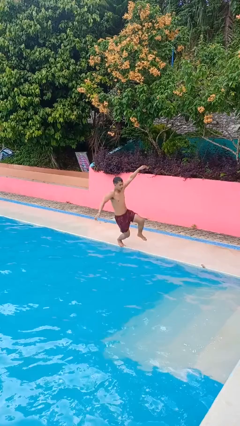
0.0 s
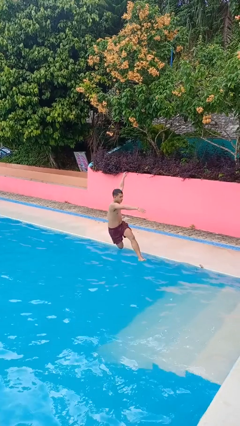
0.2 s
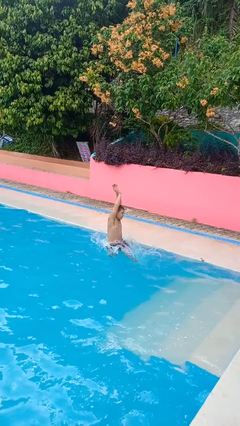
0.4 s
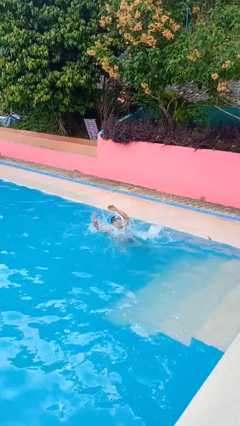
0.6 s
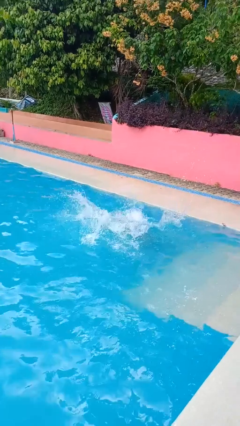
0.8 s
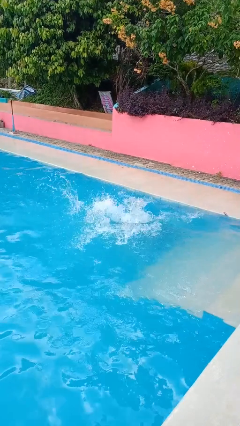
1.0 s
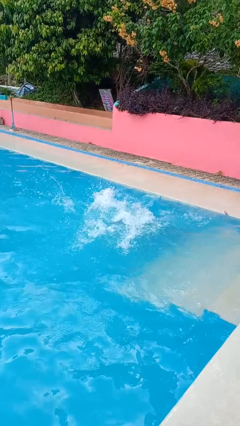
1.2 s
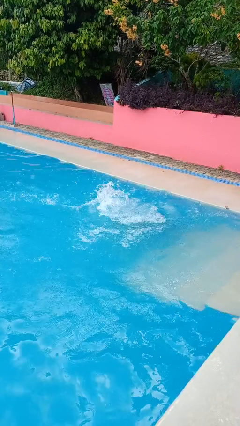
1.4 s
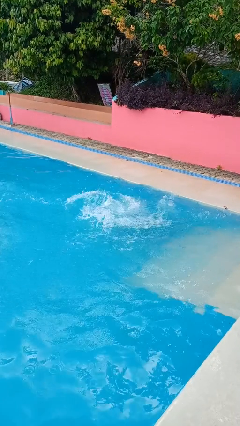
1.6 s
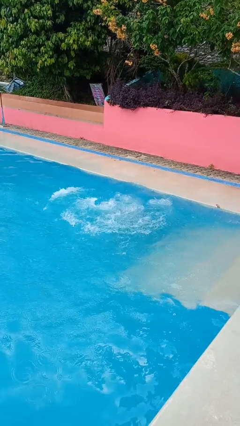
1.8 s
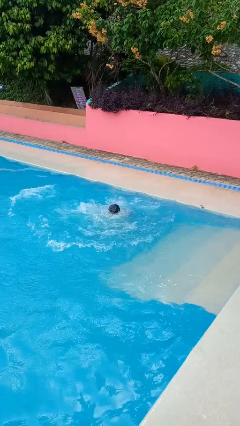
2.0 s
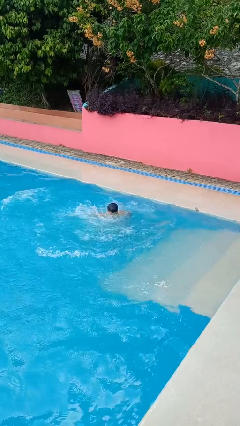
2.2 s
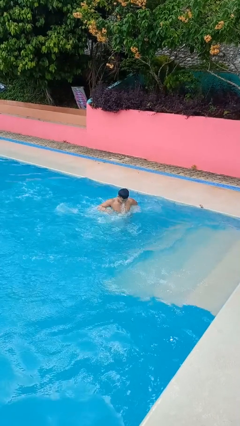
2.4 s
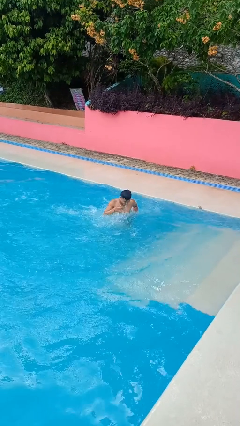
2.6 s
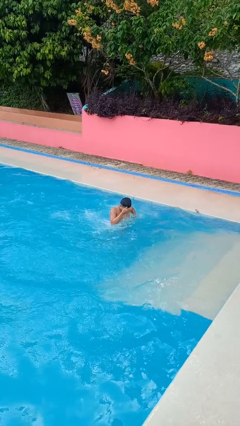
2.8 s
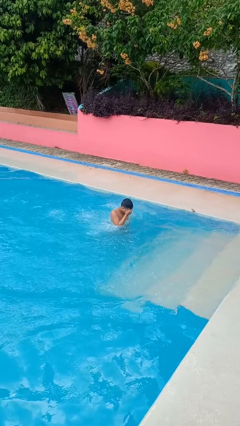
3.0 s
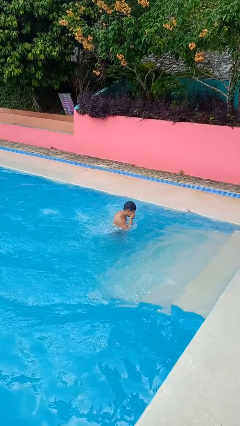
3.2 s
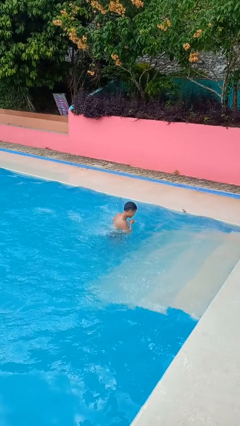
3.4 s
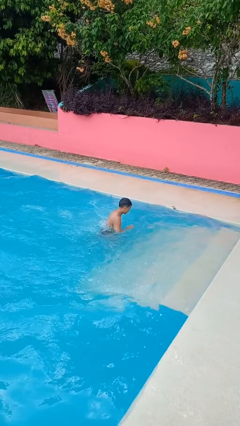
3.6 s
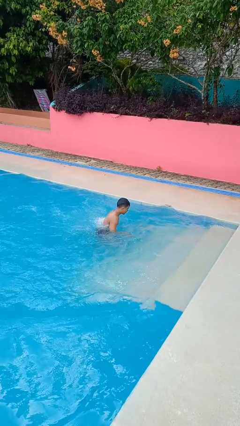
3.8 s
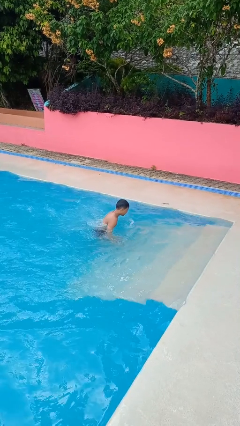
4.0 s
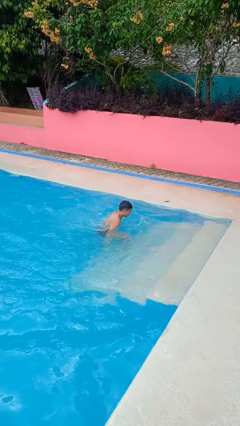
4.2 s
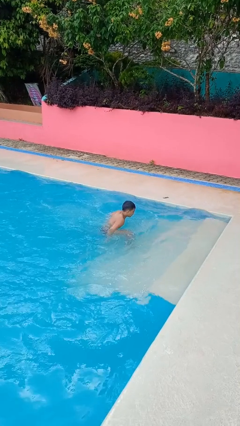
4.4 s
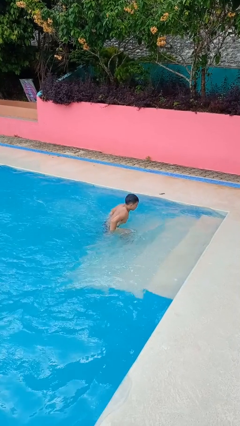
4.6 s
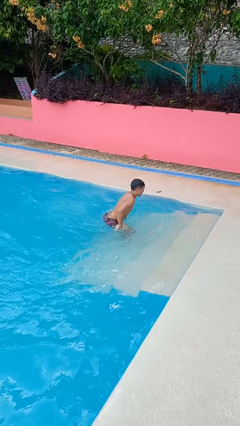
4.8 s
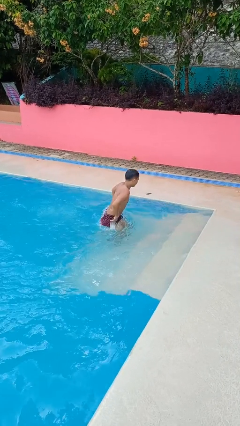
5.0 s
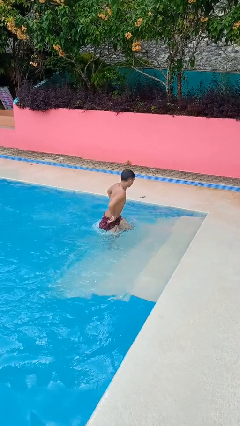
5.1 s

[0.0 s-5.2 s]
person falls into pool

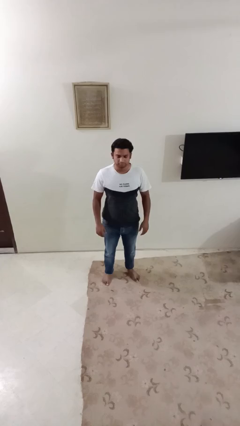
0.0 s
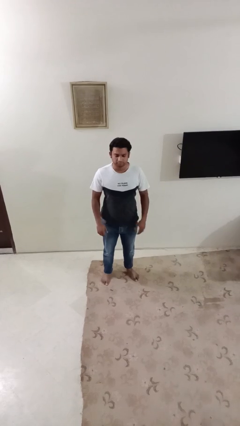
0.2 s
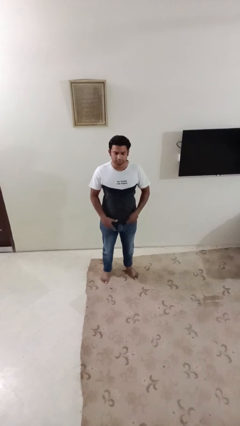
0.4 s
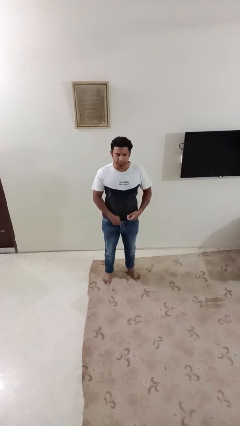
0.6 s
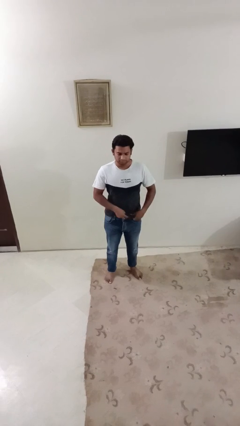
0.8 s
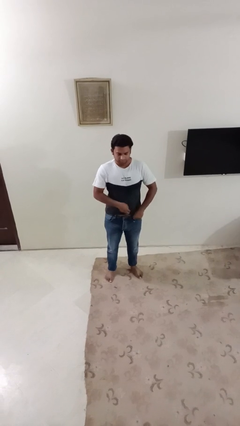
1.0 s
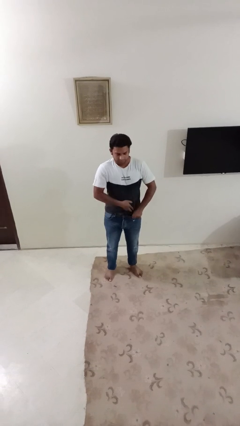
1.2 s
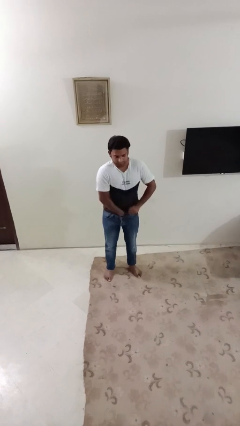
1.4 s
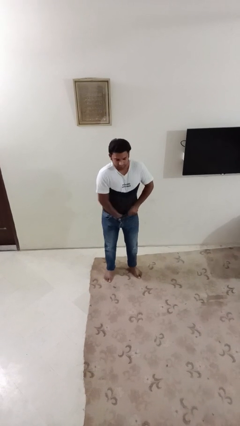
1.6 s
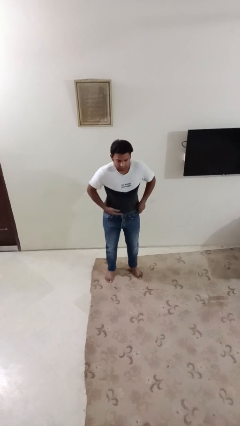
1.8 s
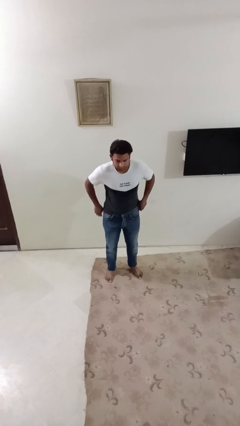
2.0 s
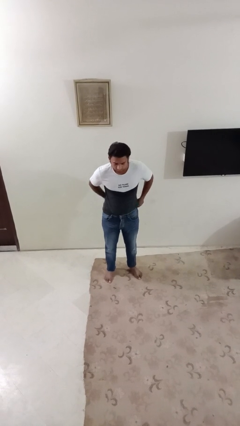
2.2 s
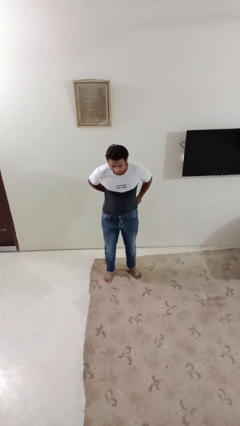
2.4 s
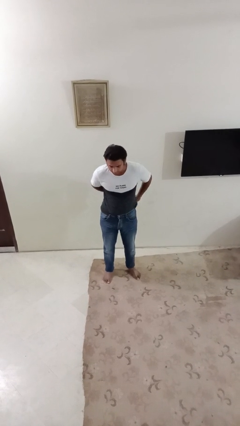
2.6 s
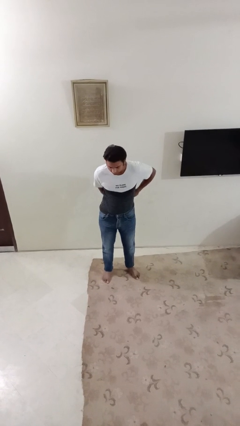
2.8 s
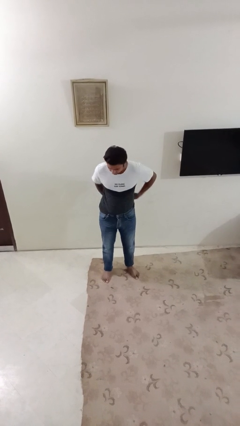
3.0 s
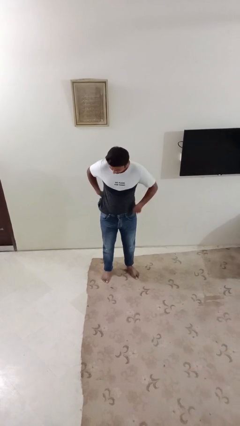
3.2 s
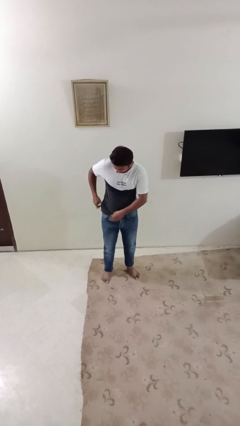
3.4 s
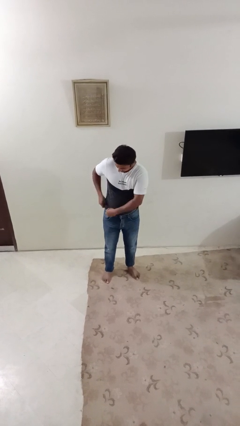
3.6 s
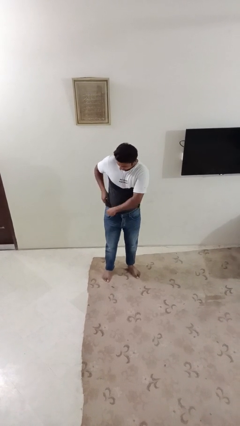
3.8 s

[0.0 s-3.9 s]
person tucks in shirt

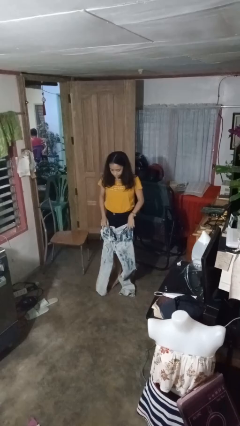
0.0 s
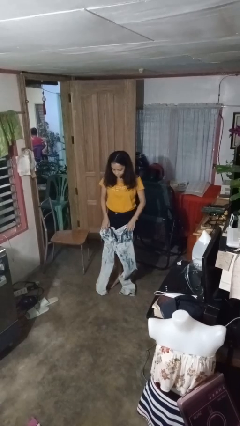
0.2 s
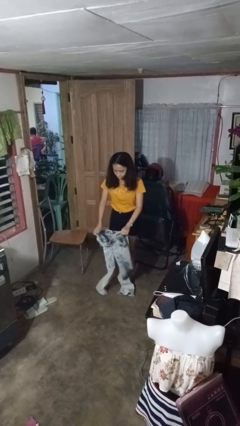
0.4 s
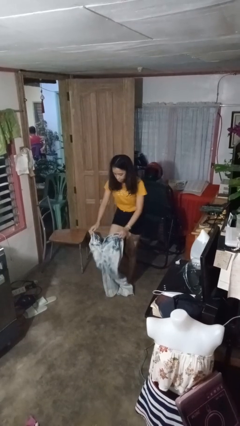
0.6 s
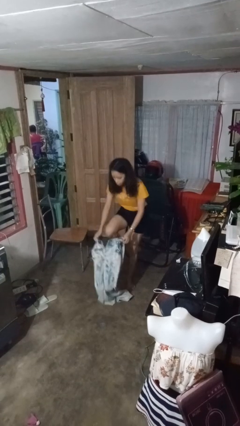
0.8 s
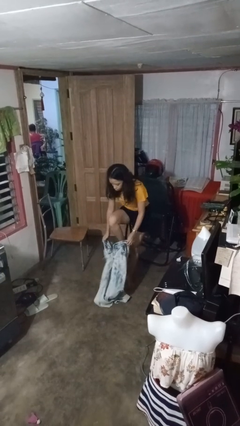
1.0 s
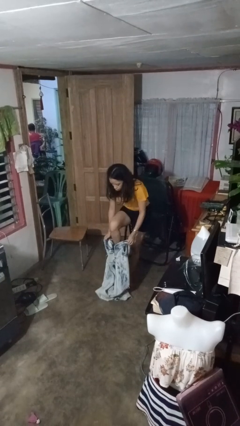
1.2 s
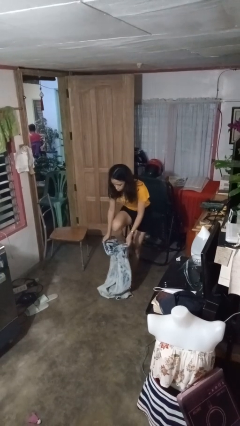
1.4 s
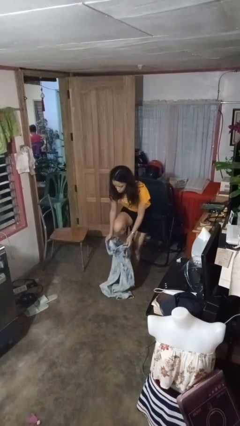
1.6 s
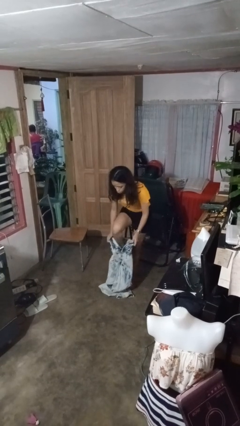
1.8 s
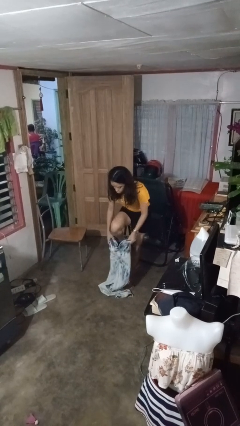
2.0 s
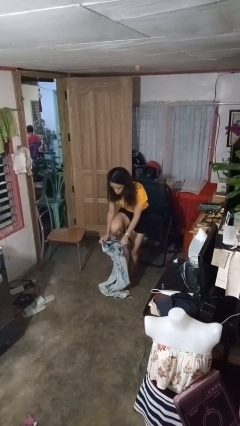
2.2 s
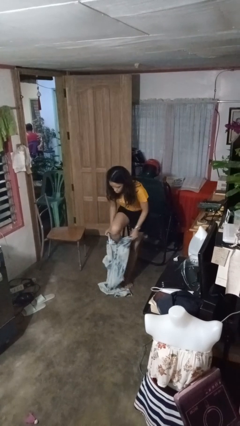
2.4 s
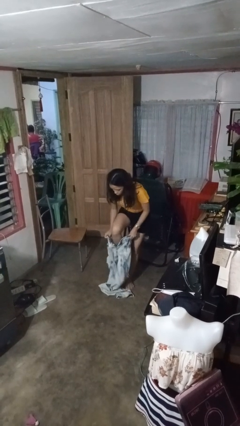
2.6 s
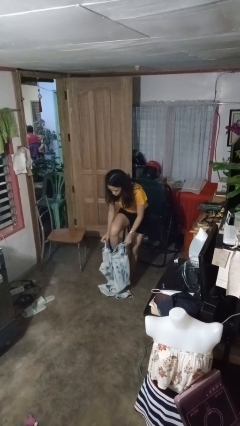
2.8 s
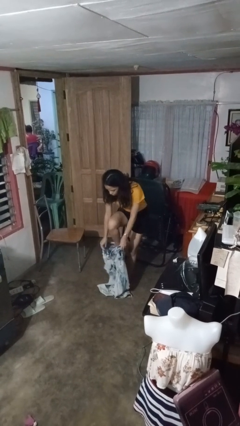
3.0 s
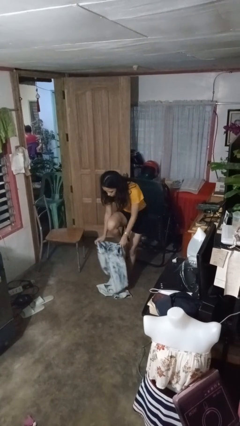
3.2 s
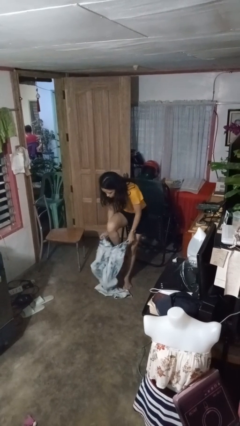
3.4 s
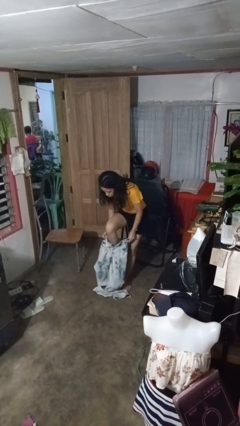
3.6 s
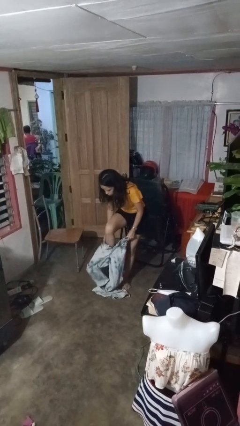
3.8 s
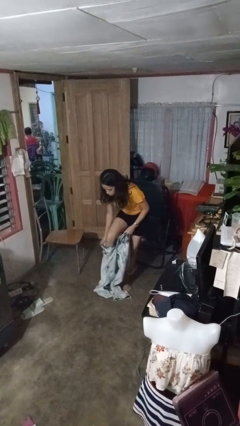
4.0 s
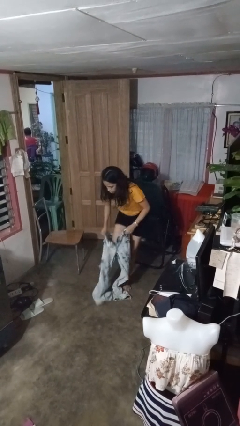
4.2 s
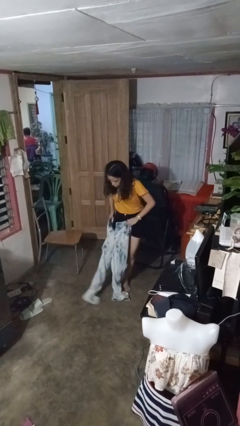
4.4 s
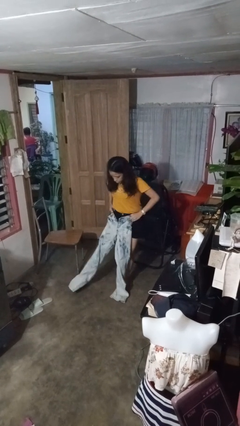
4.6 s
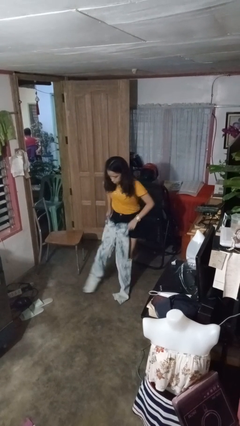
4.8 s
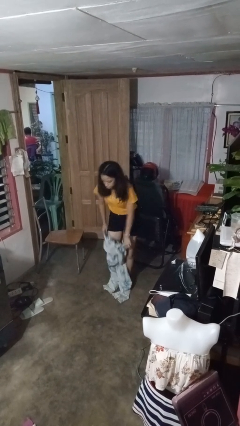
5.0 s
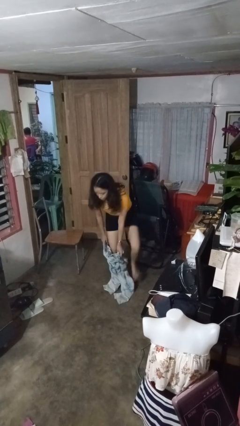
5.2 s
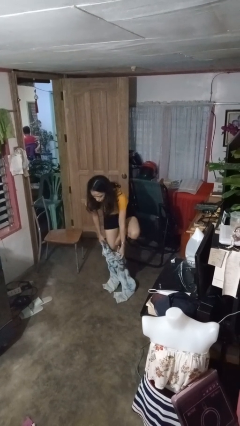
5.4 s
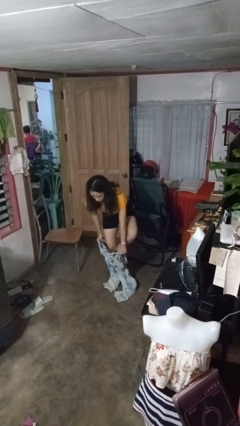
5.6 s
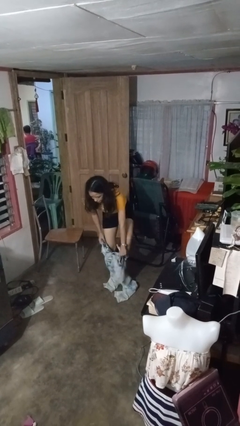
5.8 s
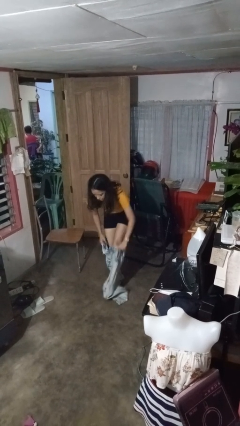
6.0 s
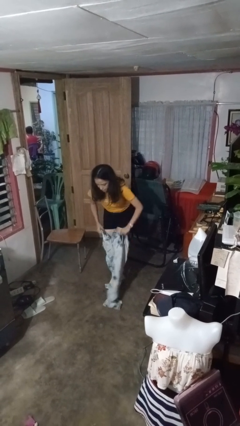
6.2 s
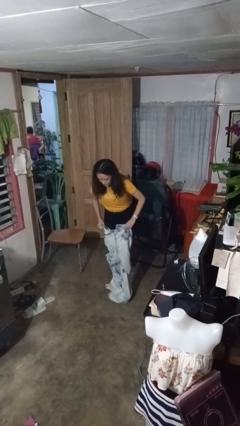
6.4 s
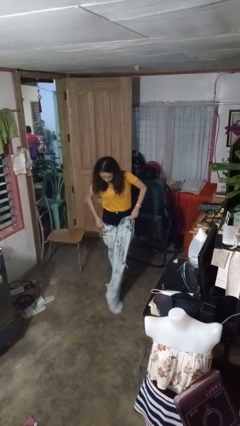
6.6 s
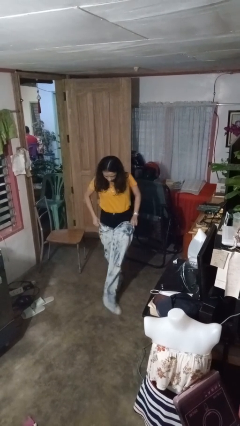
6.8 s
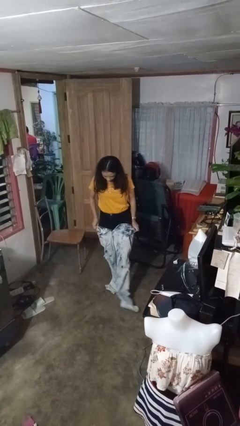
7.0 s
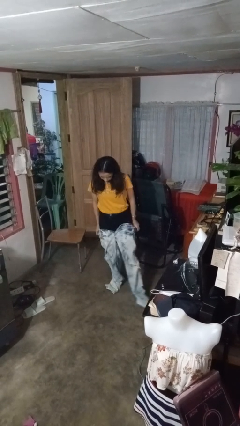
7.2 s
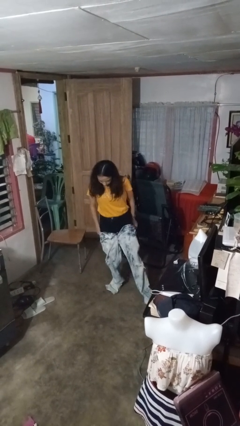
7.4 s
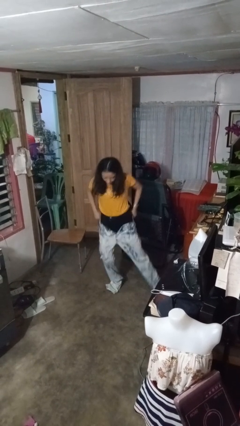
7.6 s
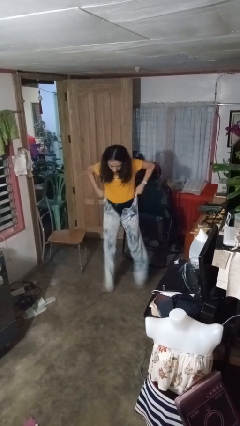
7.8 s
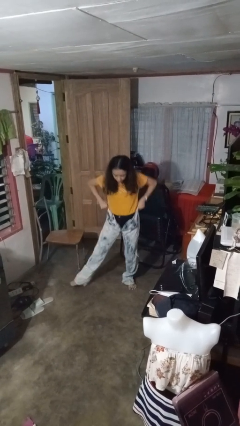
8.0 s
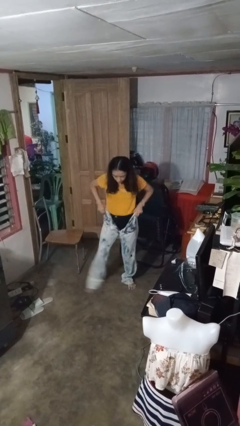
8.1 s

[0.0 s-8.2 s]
person puts on pants

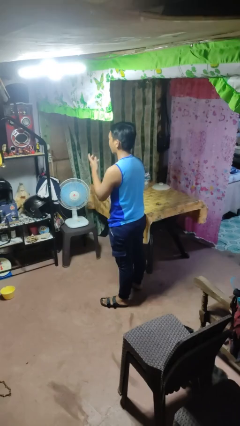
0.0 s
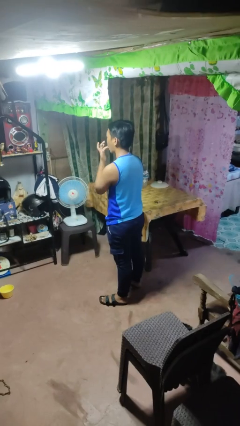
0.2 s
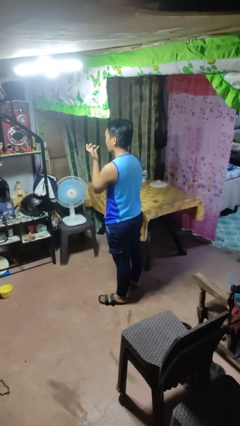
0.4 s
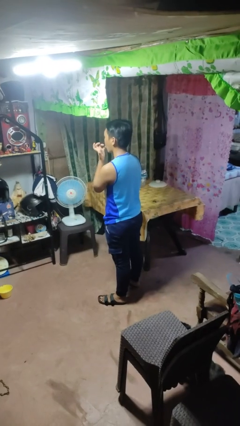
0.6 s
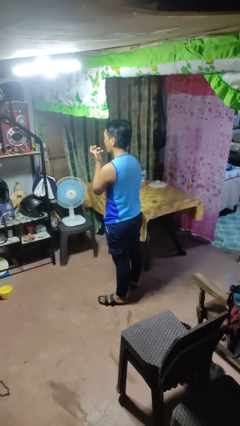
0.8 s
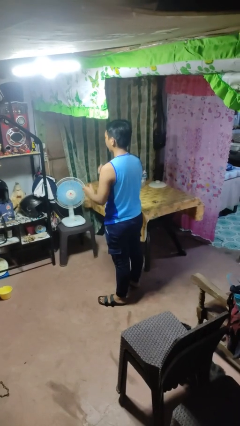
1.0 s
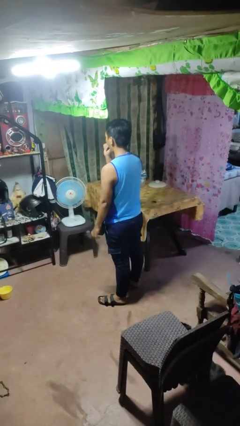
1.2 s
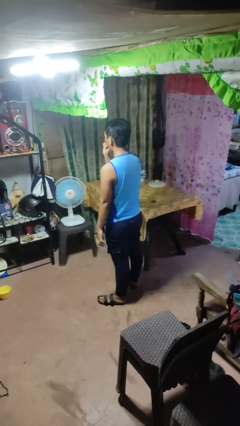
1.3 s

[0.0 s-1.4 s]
person licks fingers
